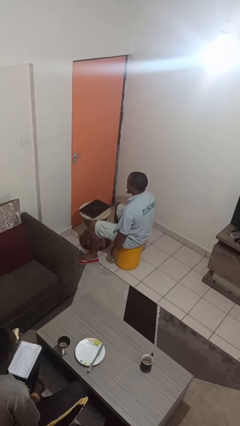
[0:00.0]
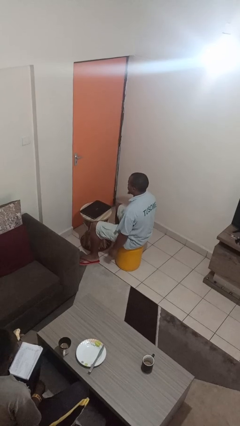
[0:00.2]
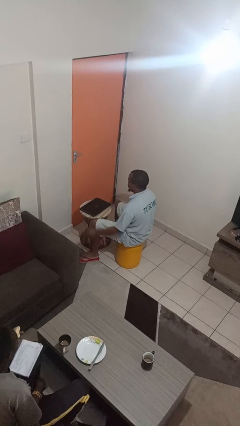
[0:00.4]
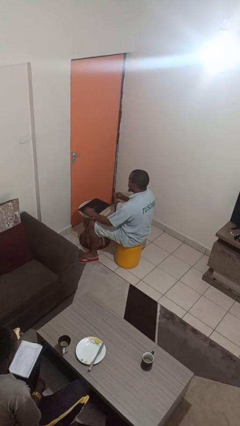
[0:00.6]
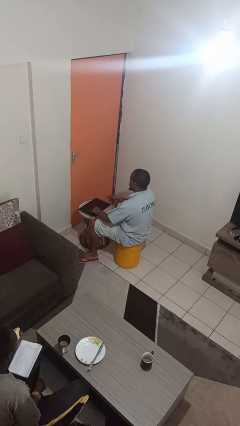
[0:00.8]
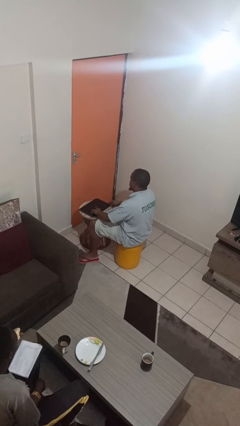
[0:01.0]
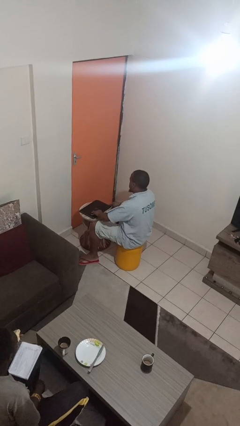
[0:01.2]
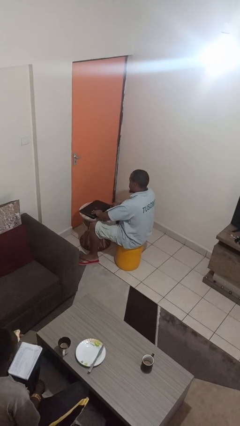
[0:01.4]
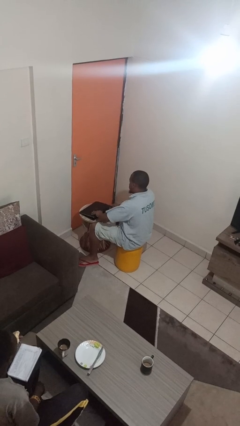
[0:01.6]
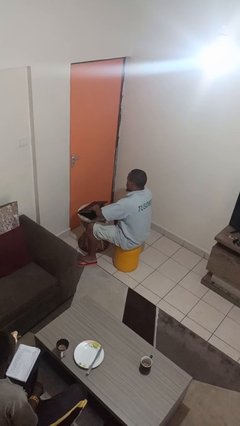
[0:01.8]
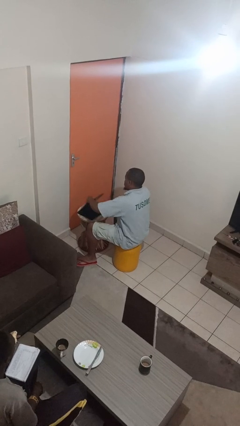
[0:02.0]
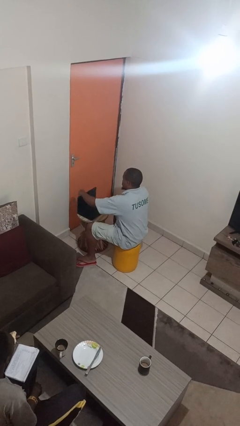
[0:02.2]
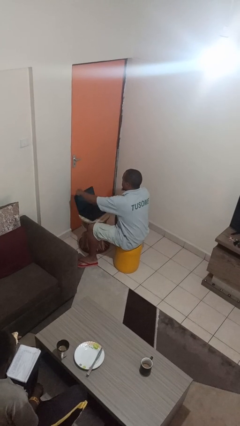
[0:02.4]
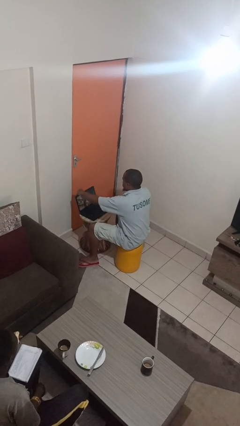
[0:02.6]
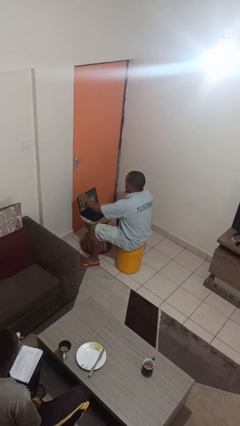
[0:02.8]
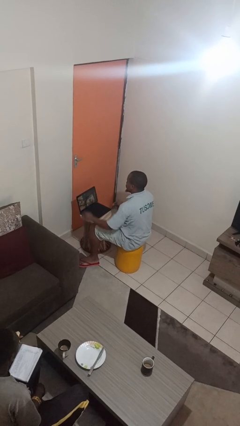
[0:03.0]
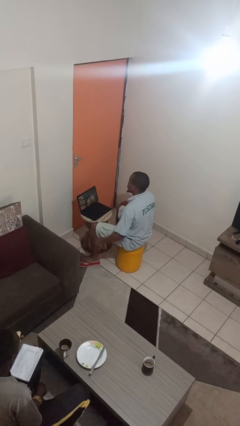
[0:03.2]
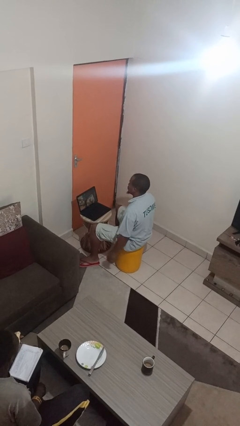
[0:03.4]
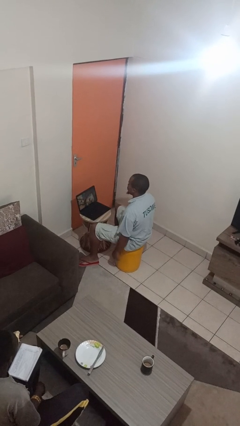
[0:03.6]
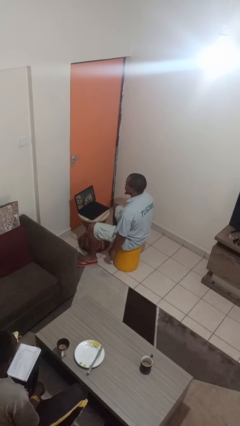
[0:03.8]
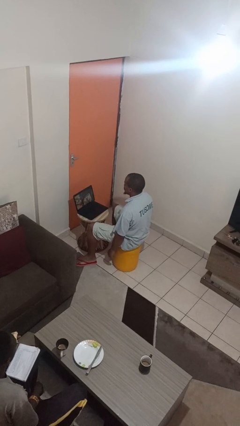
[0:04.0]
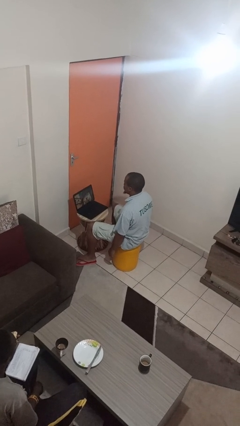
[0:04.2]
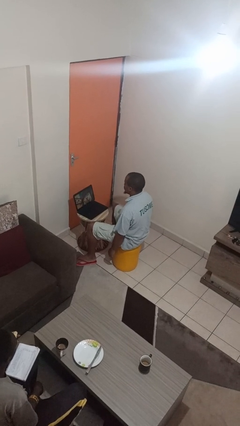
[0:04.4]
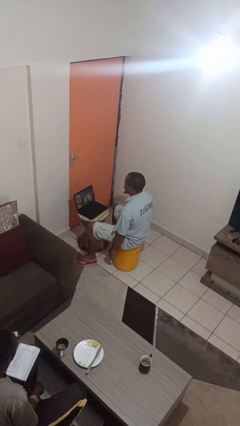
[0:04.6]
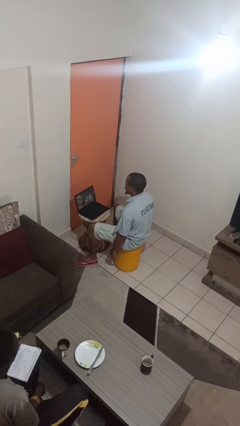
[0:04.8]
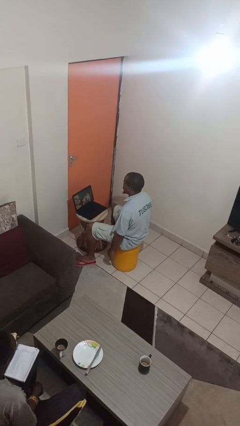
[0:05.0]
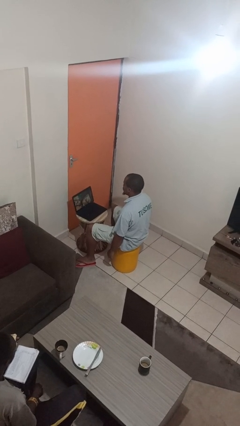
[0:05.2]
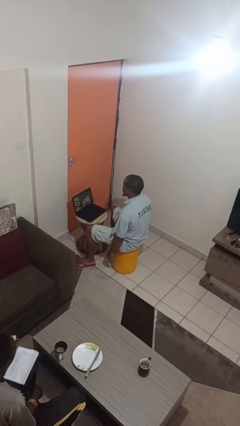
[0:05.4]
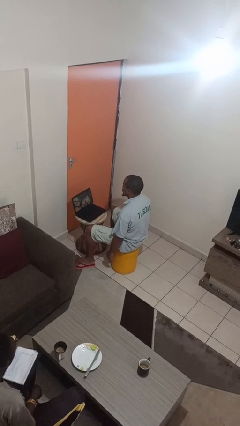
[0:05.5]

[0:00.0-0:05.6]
person opens laptop

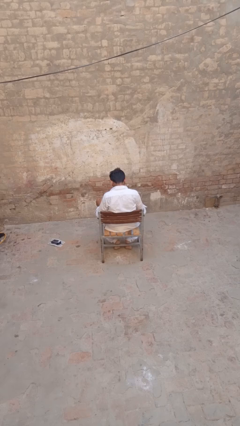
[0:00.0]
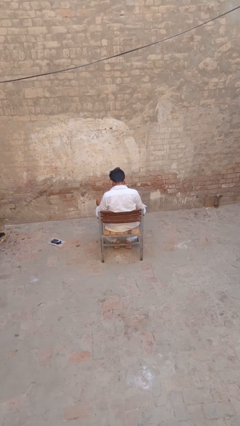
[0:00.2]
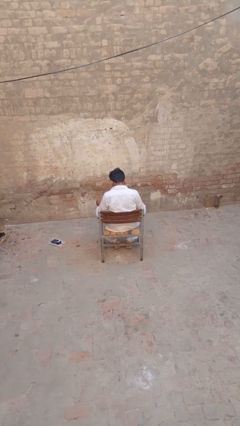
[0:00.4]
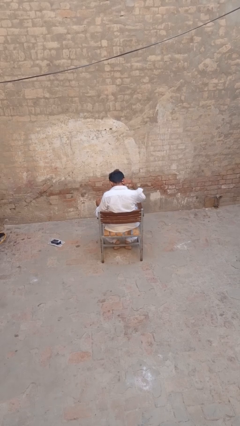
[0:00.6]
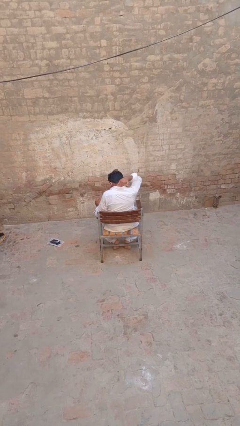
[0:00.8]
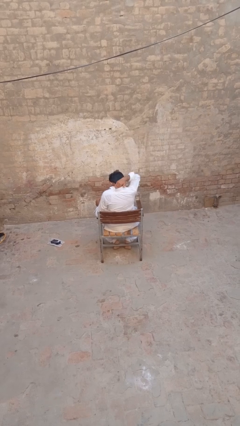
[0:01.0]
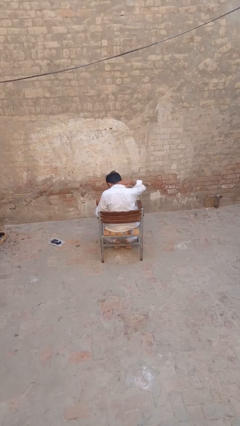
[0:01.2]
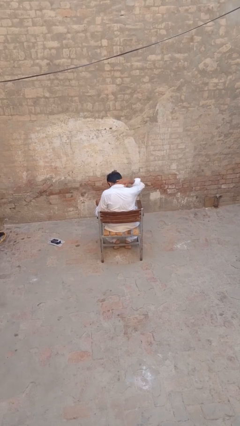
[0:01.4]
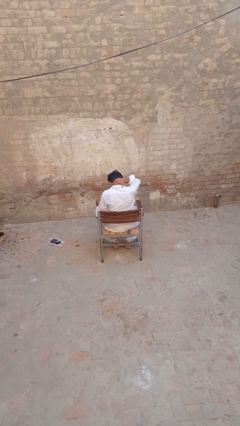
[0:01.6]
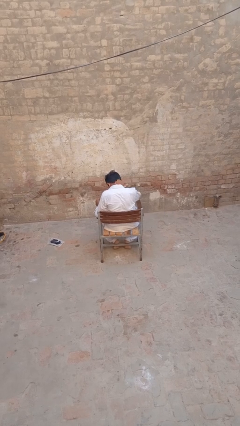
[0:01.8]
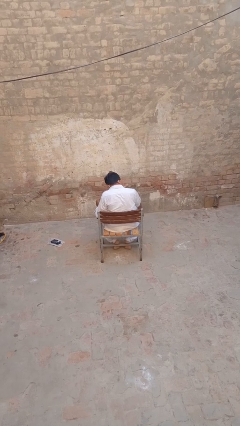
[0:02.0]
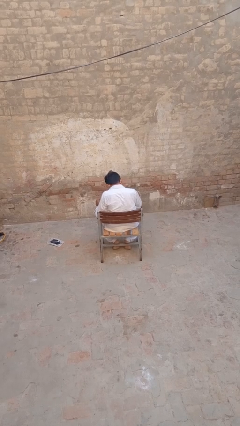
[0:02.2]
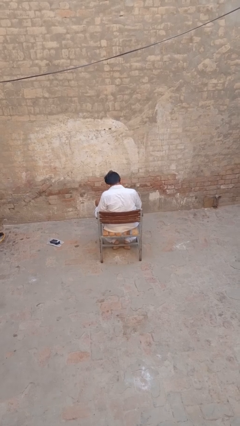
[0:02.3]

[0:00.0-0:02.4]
person rubs neck

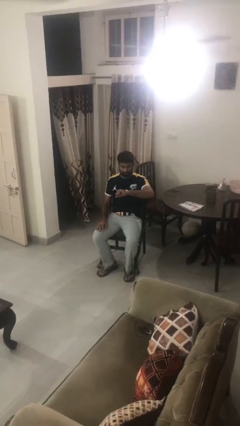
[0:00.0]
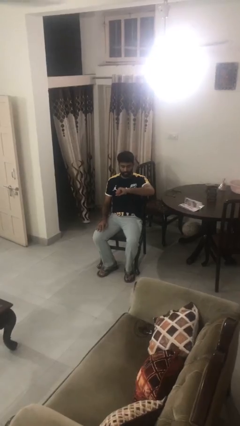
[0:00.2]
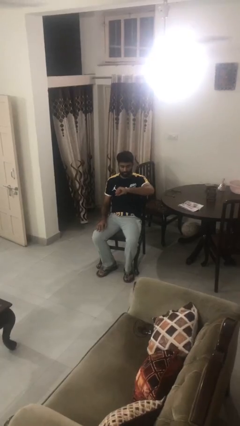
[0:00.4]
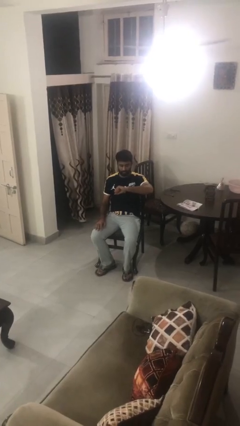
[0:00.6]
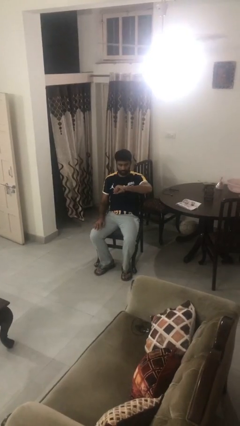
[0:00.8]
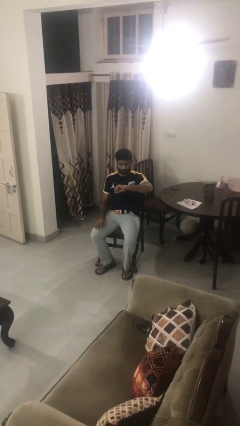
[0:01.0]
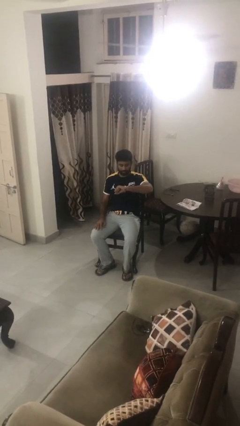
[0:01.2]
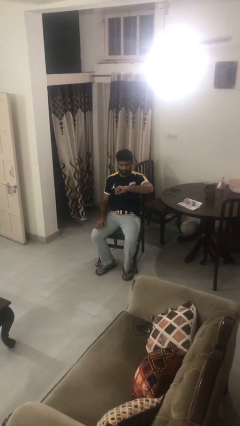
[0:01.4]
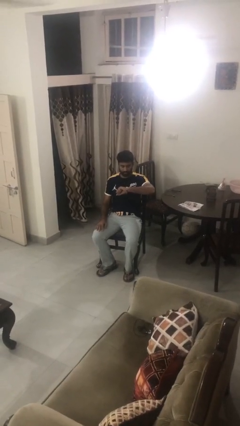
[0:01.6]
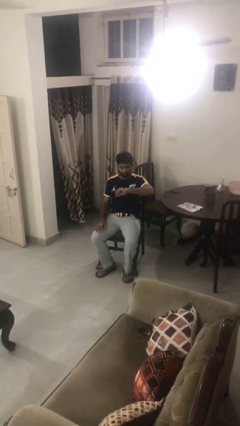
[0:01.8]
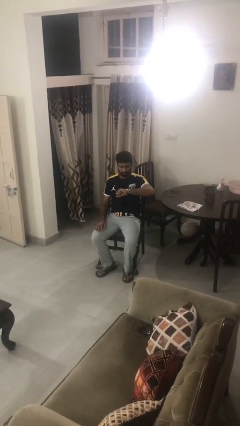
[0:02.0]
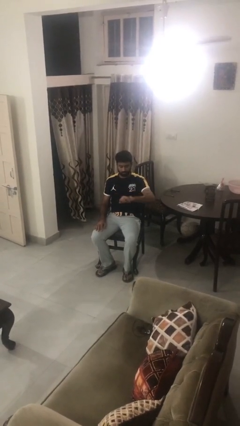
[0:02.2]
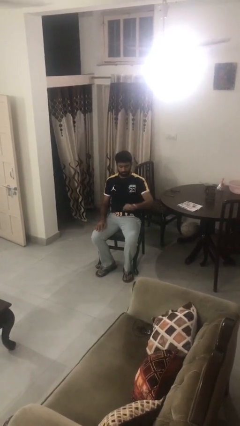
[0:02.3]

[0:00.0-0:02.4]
person looks at wristwatch

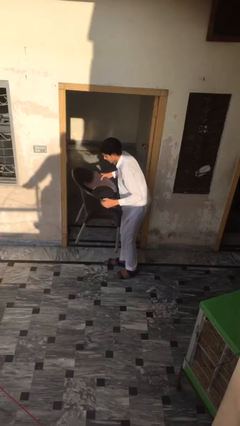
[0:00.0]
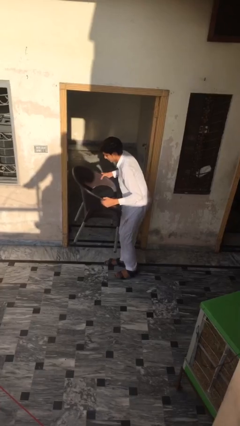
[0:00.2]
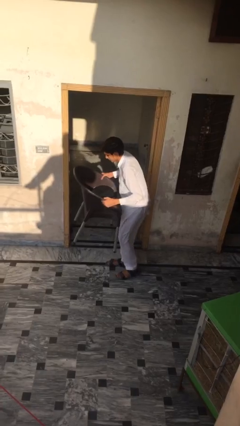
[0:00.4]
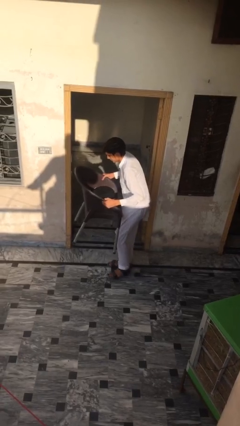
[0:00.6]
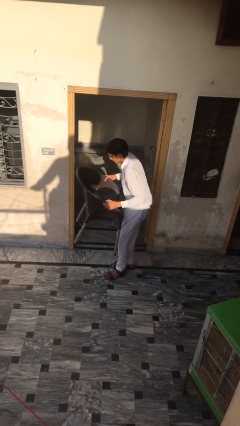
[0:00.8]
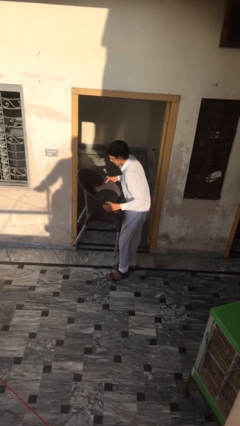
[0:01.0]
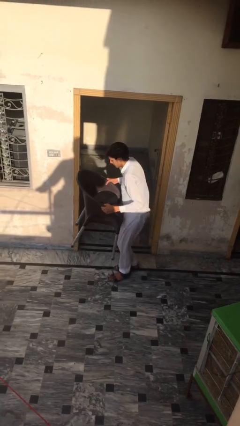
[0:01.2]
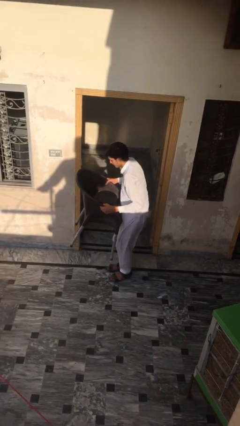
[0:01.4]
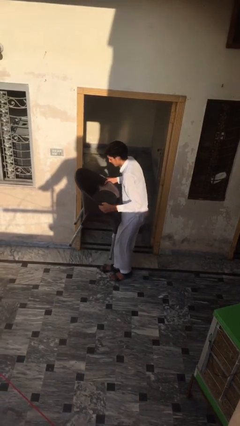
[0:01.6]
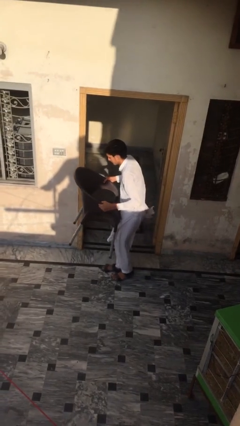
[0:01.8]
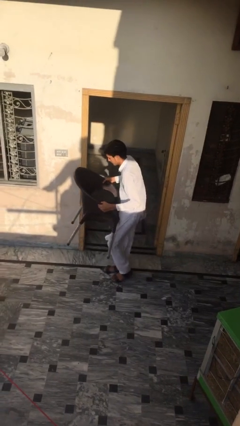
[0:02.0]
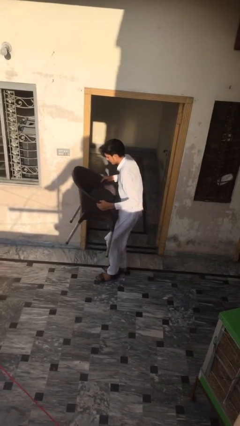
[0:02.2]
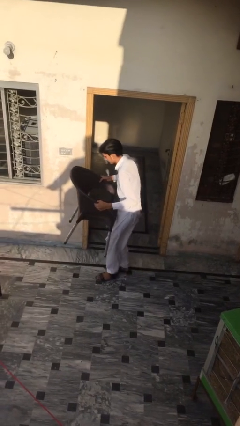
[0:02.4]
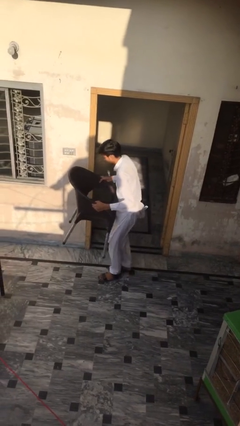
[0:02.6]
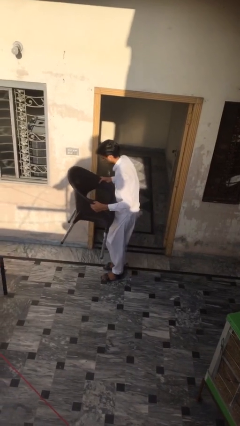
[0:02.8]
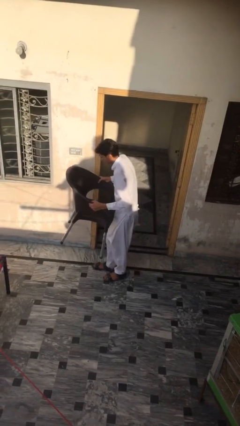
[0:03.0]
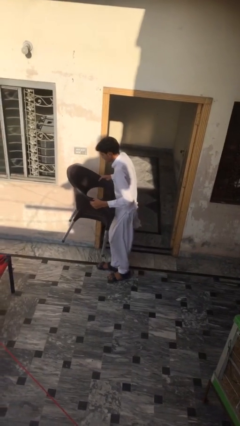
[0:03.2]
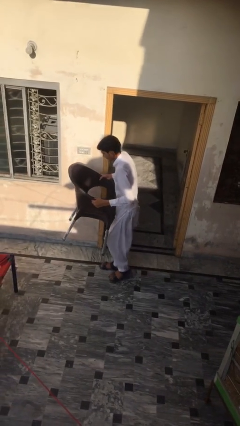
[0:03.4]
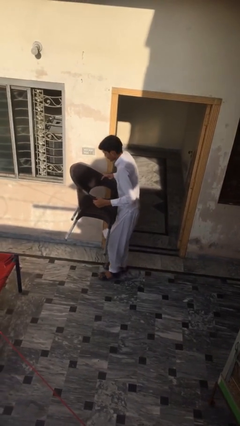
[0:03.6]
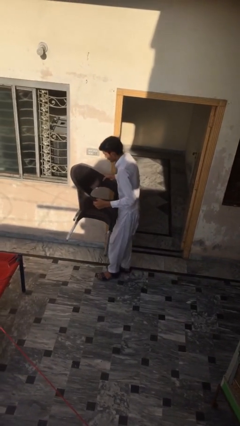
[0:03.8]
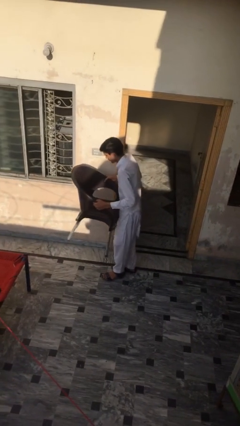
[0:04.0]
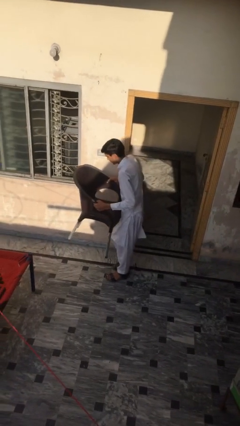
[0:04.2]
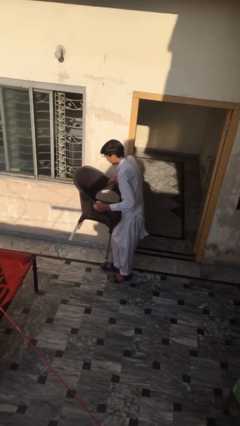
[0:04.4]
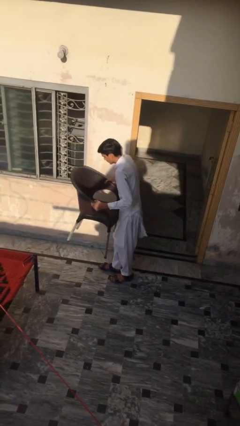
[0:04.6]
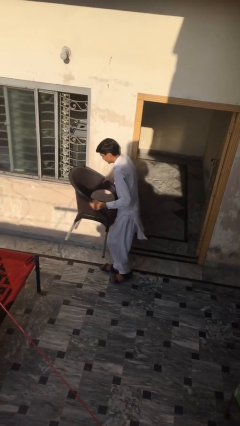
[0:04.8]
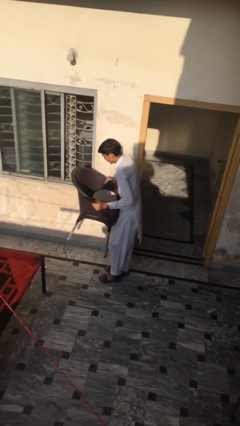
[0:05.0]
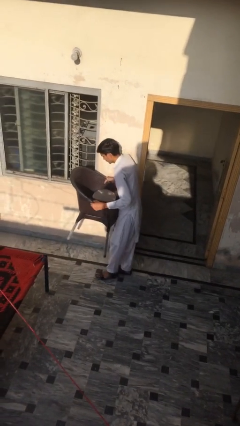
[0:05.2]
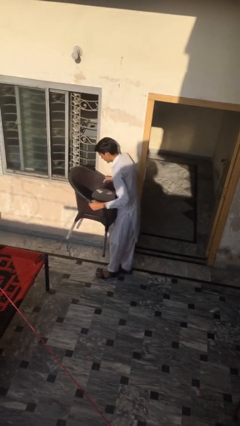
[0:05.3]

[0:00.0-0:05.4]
person carries heavy object

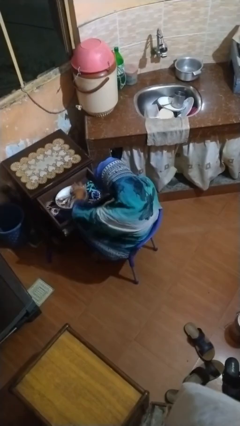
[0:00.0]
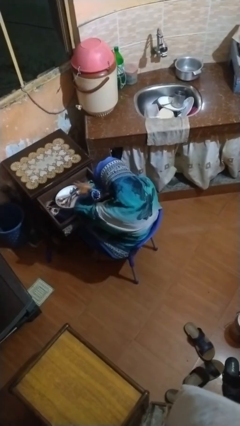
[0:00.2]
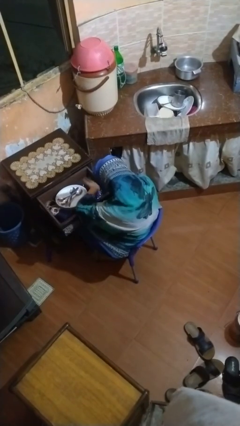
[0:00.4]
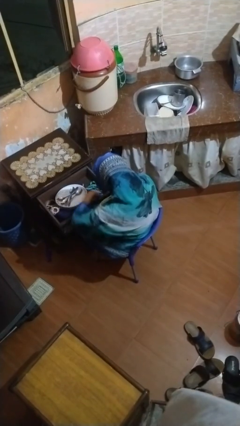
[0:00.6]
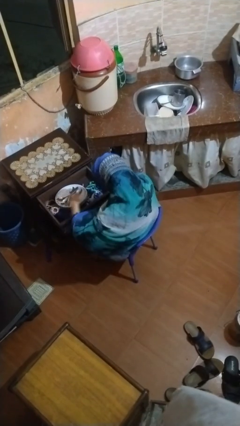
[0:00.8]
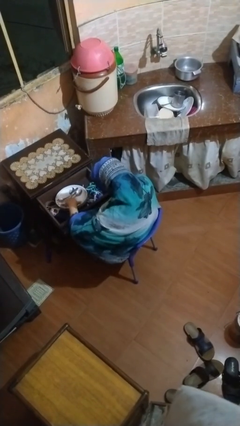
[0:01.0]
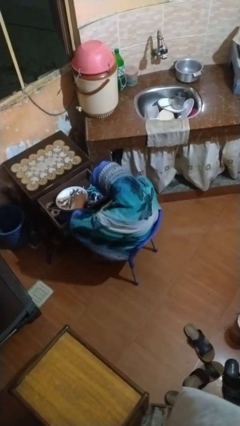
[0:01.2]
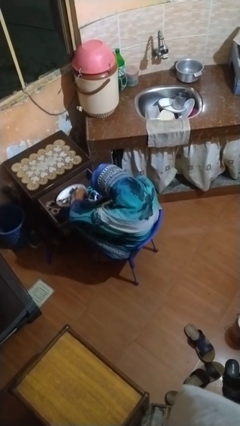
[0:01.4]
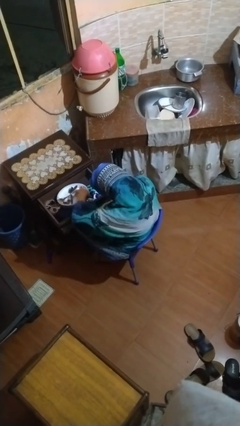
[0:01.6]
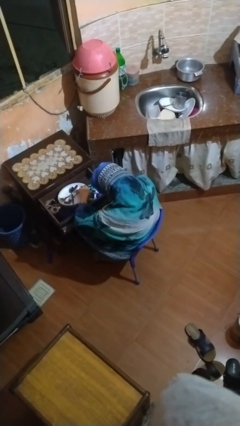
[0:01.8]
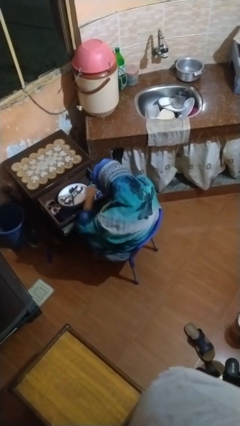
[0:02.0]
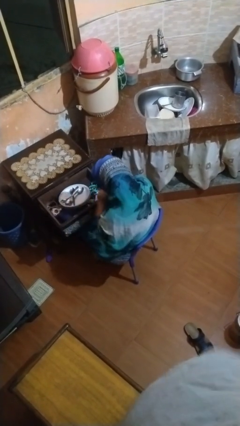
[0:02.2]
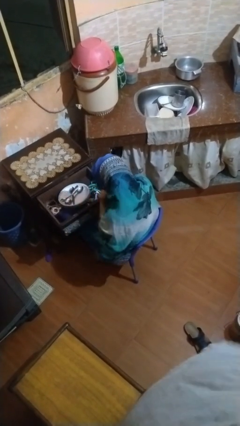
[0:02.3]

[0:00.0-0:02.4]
person searches in kitchen drawer
